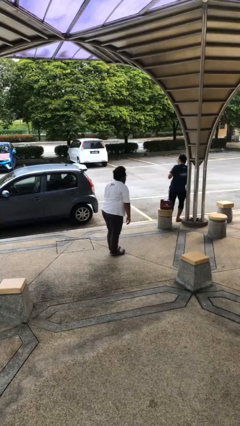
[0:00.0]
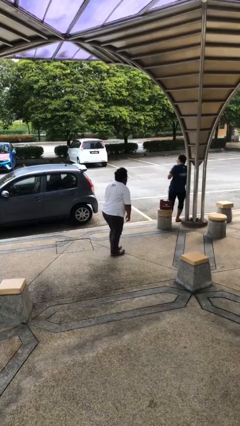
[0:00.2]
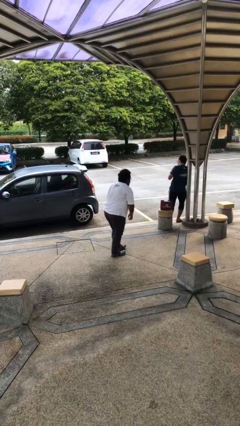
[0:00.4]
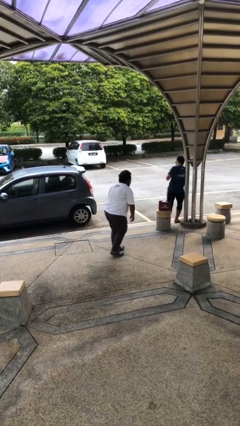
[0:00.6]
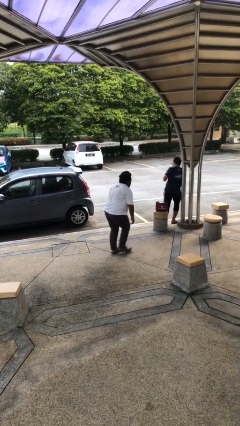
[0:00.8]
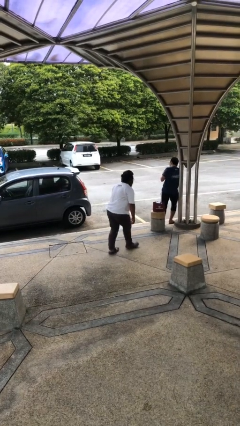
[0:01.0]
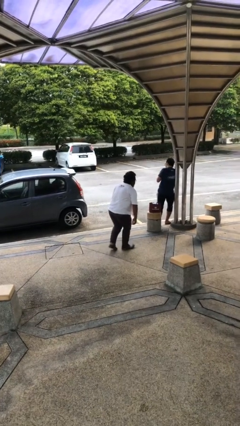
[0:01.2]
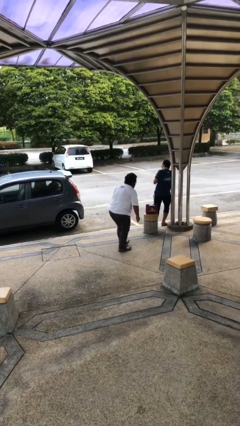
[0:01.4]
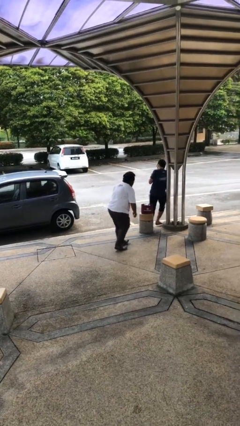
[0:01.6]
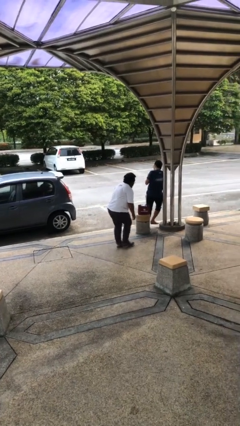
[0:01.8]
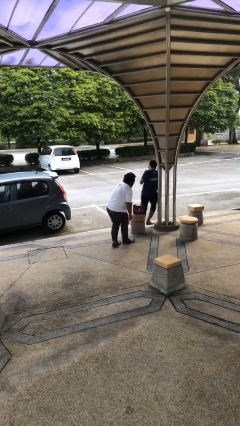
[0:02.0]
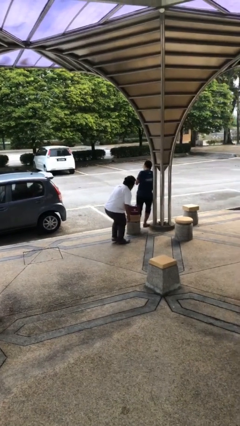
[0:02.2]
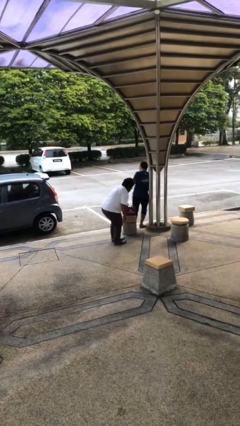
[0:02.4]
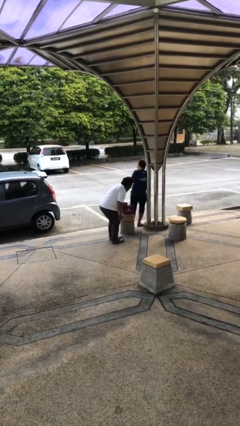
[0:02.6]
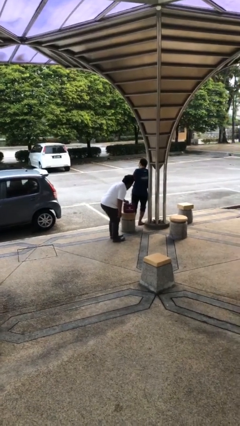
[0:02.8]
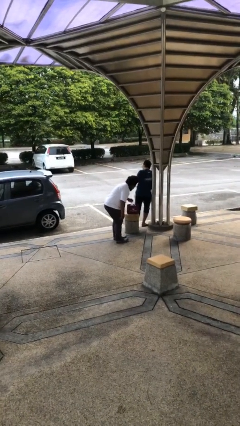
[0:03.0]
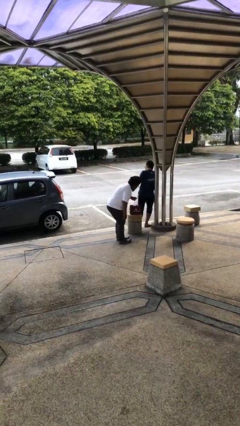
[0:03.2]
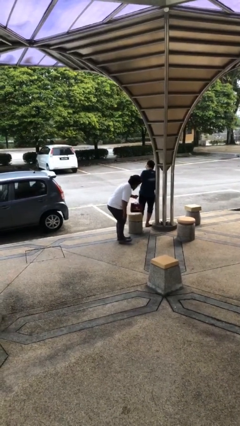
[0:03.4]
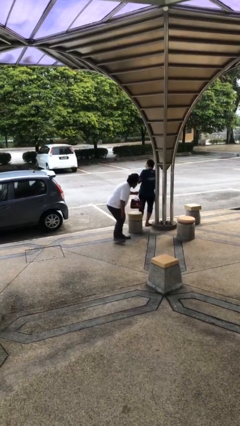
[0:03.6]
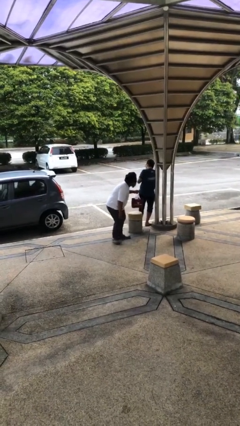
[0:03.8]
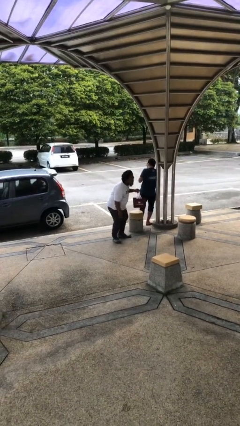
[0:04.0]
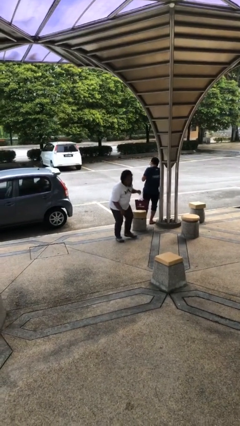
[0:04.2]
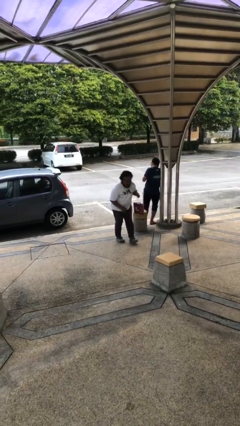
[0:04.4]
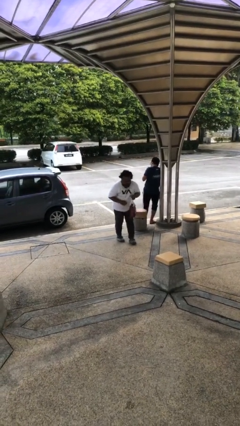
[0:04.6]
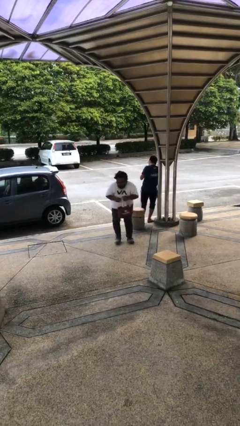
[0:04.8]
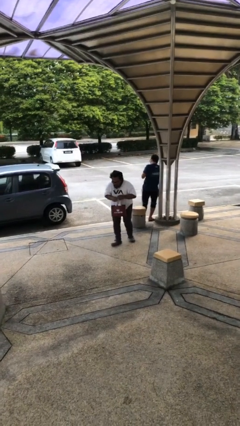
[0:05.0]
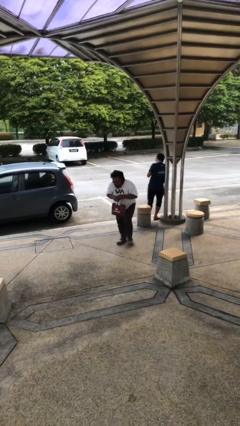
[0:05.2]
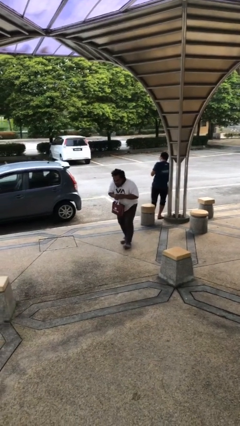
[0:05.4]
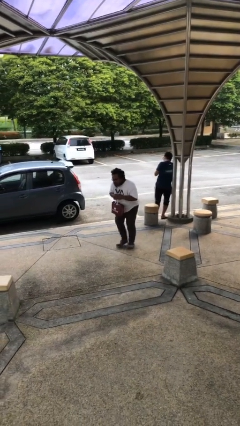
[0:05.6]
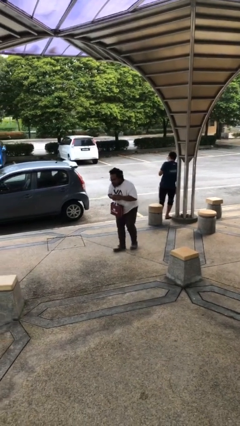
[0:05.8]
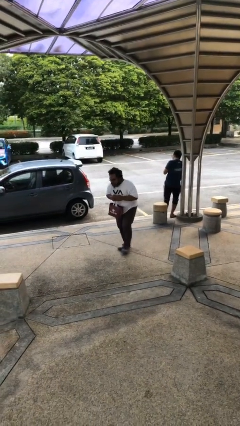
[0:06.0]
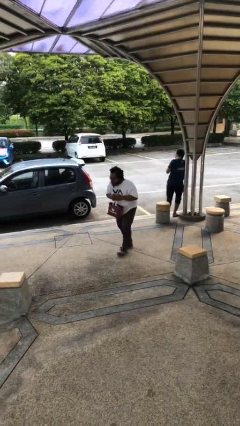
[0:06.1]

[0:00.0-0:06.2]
person steals object from person

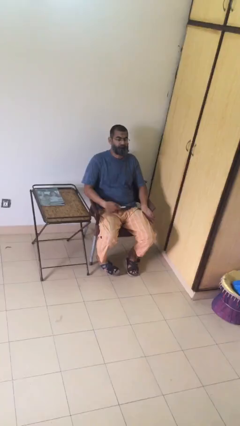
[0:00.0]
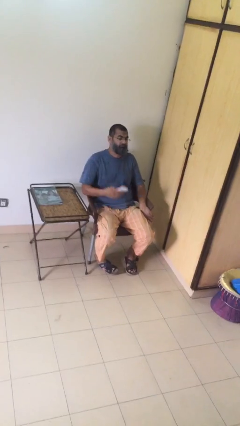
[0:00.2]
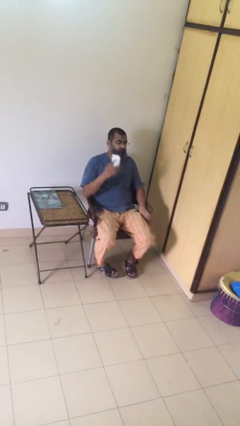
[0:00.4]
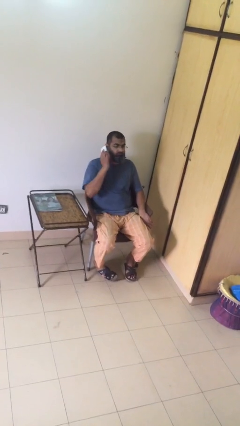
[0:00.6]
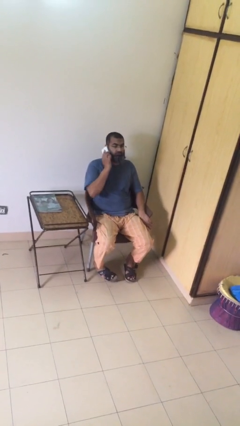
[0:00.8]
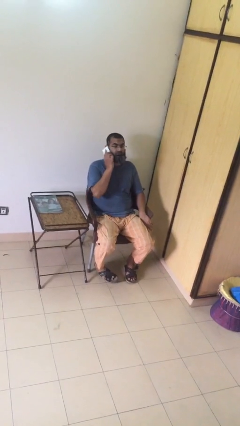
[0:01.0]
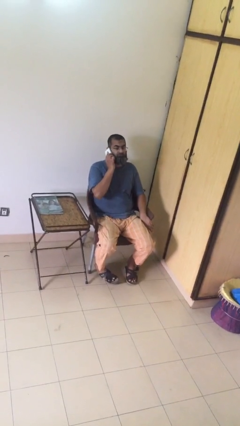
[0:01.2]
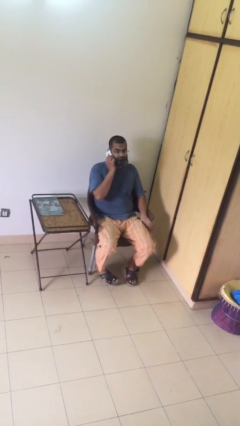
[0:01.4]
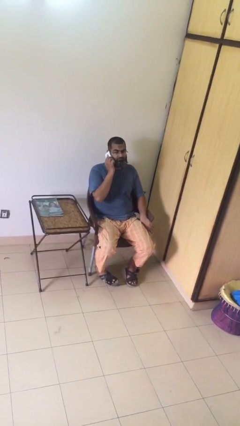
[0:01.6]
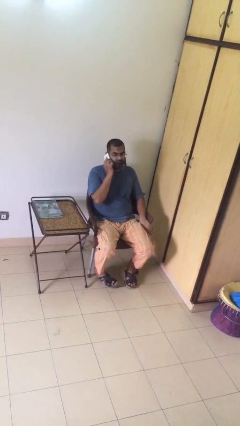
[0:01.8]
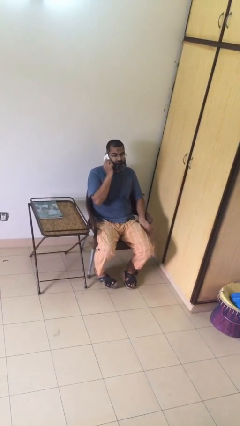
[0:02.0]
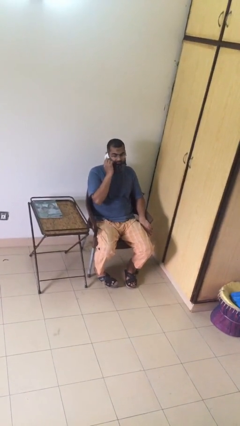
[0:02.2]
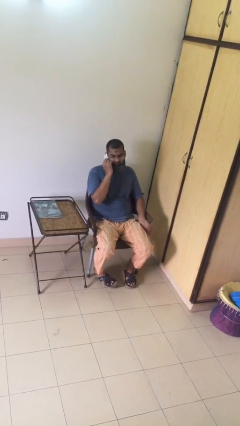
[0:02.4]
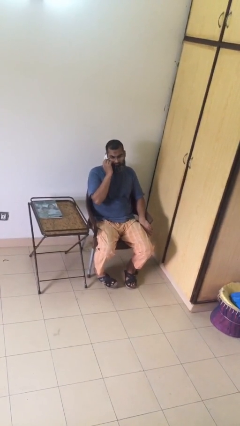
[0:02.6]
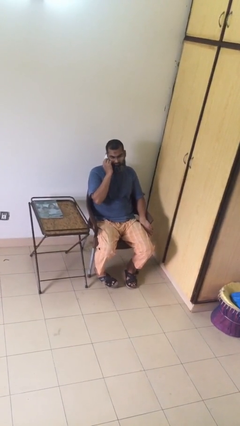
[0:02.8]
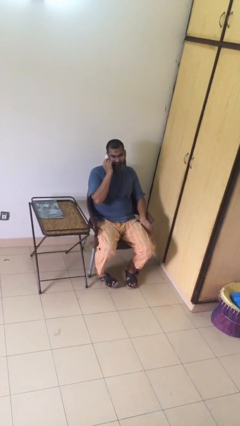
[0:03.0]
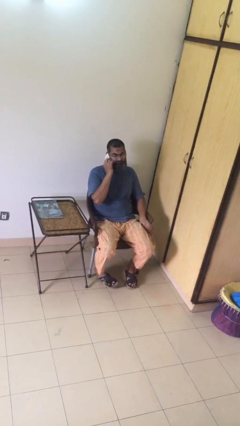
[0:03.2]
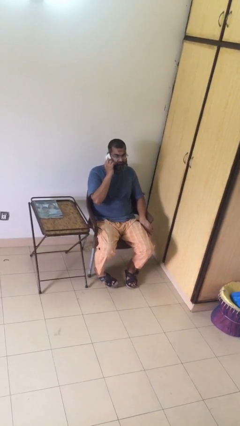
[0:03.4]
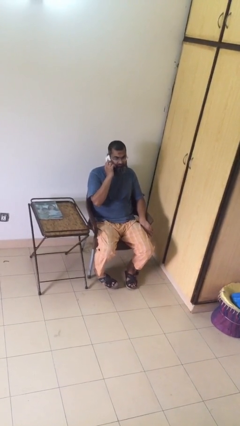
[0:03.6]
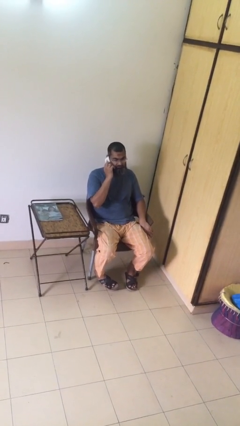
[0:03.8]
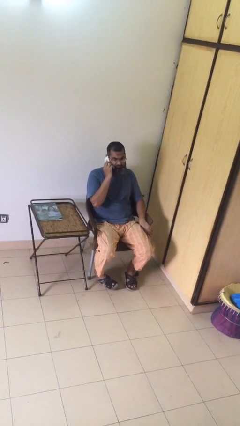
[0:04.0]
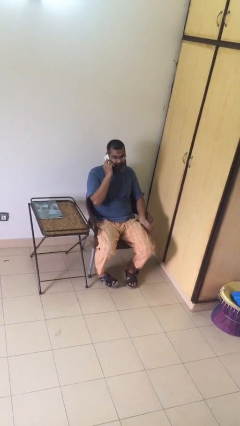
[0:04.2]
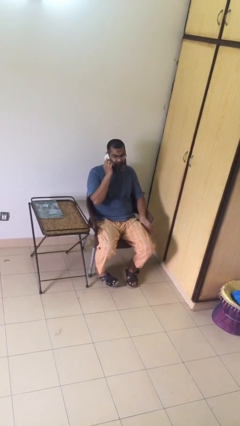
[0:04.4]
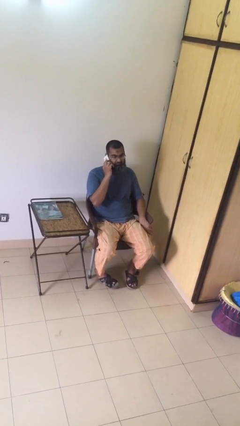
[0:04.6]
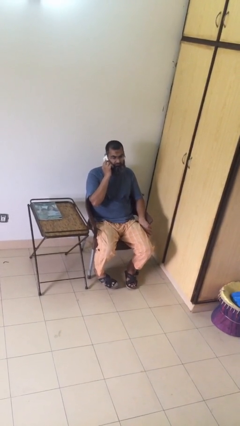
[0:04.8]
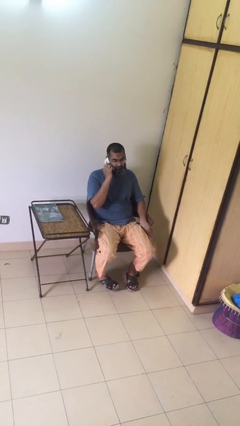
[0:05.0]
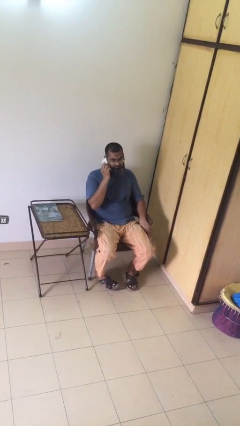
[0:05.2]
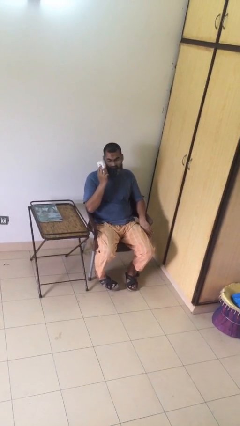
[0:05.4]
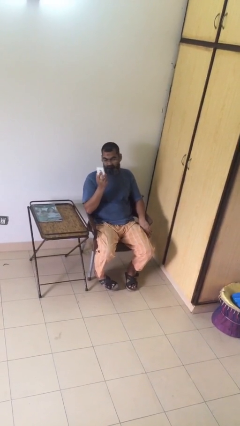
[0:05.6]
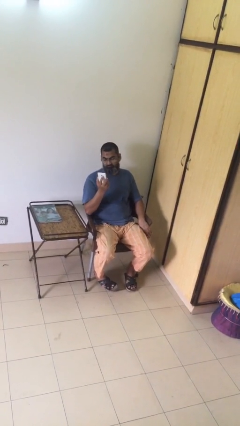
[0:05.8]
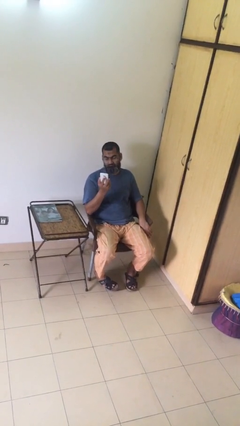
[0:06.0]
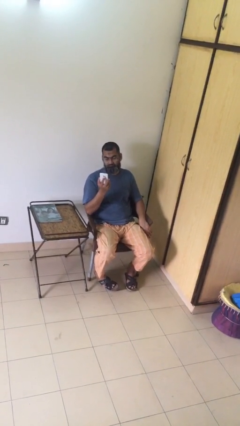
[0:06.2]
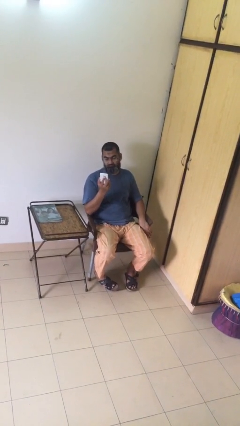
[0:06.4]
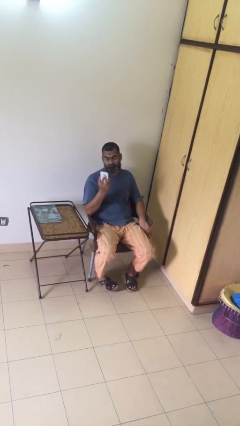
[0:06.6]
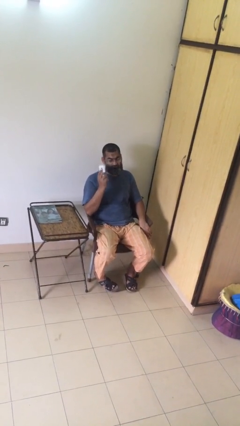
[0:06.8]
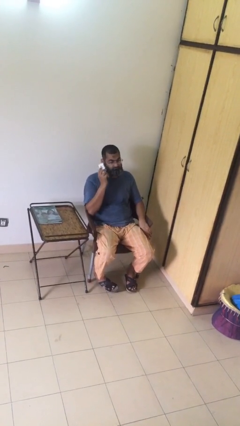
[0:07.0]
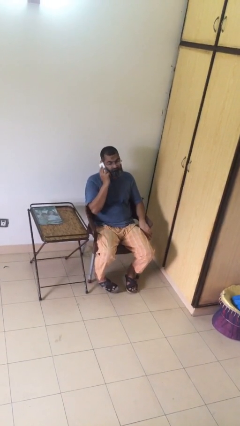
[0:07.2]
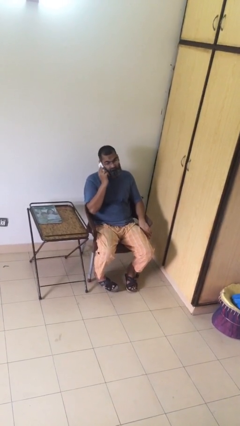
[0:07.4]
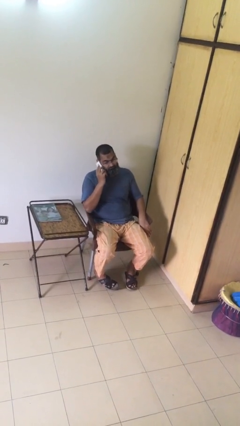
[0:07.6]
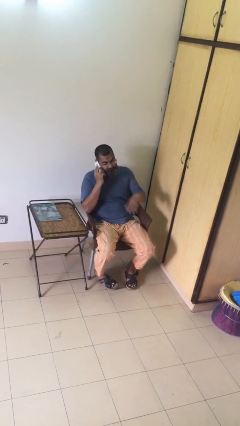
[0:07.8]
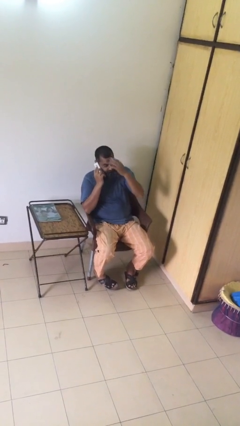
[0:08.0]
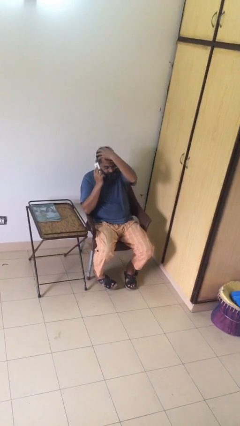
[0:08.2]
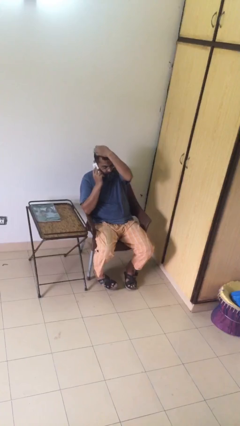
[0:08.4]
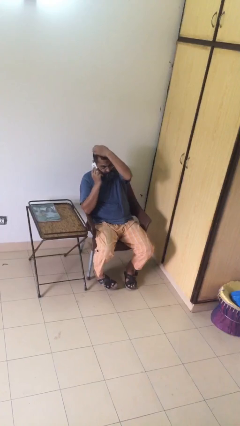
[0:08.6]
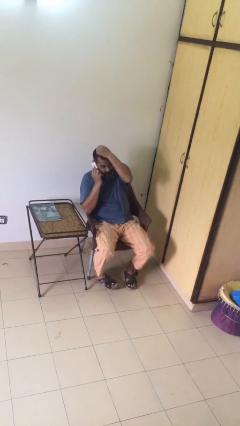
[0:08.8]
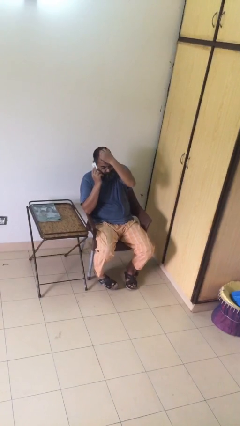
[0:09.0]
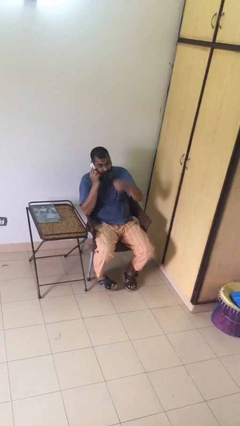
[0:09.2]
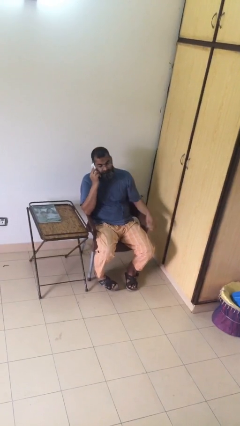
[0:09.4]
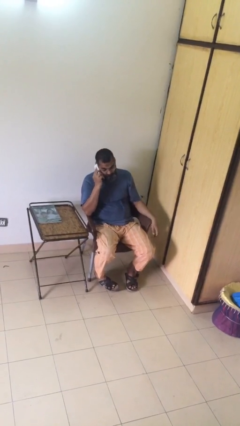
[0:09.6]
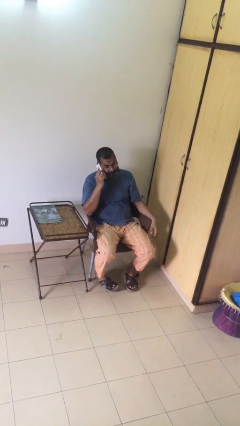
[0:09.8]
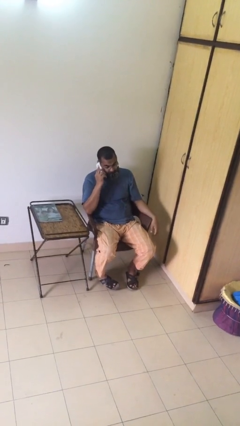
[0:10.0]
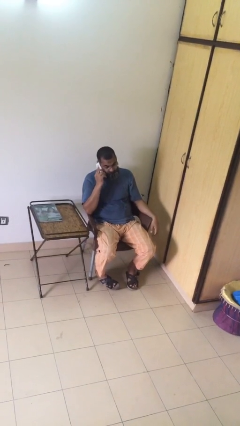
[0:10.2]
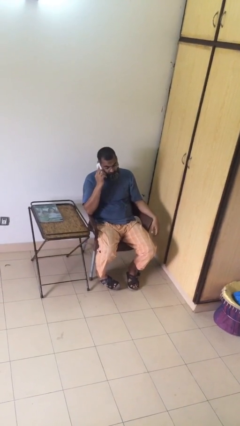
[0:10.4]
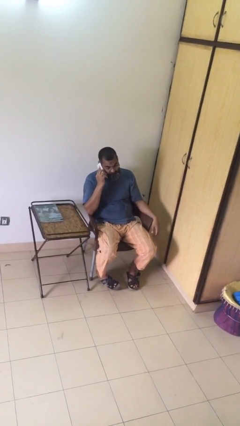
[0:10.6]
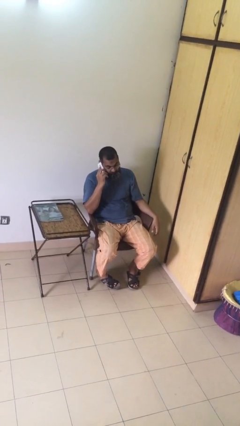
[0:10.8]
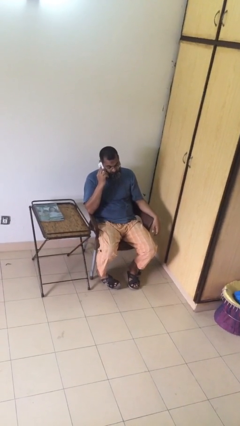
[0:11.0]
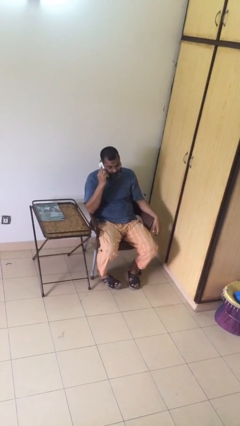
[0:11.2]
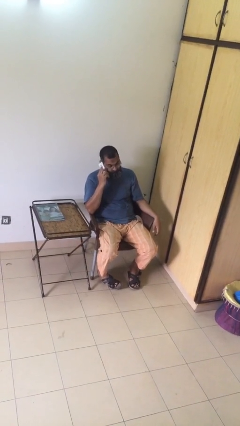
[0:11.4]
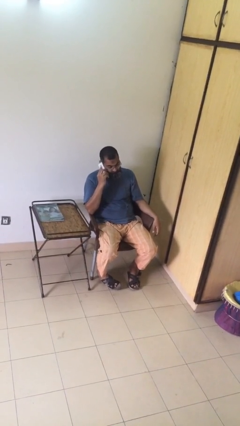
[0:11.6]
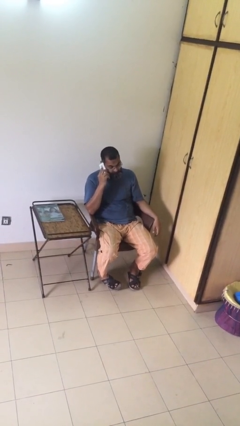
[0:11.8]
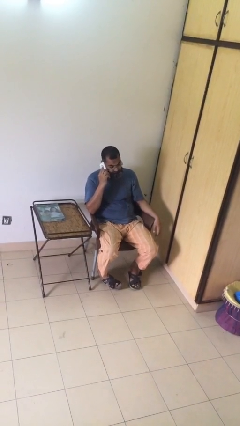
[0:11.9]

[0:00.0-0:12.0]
person talks on phone
